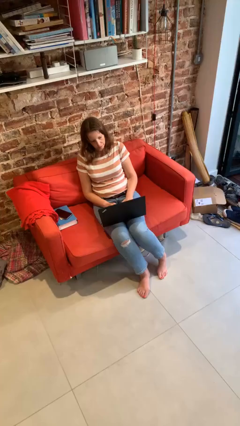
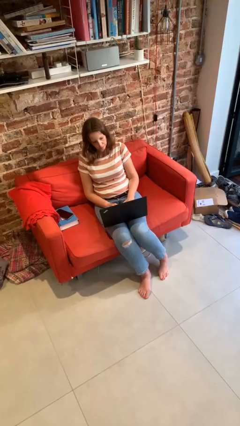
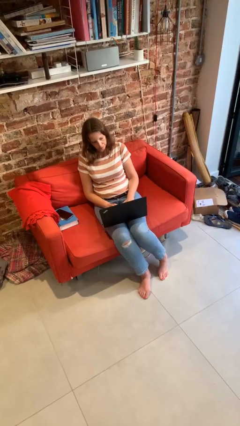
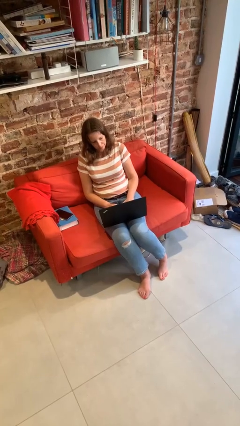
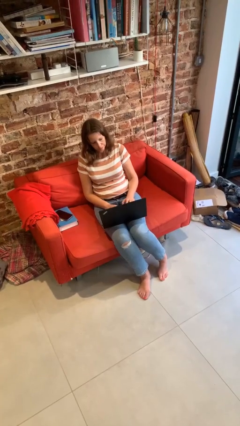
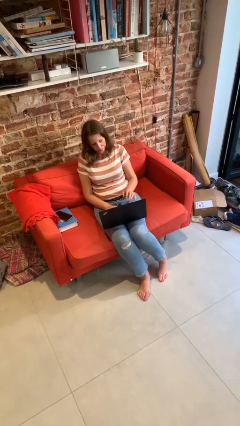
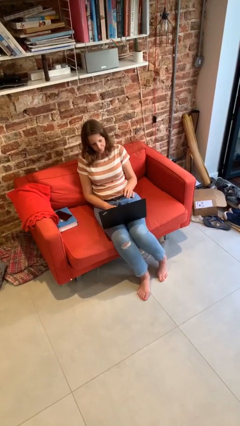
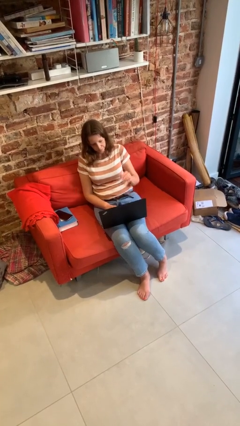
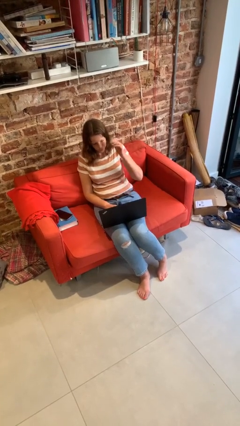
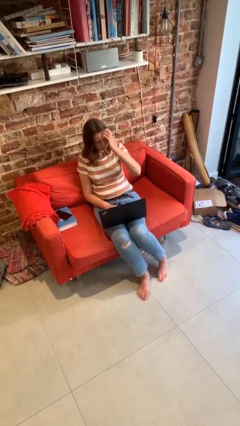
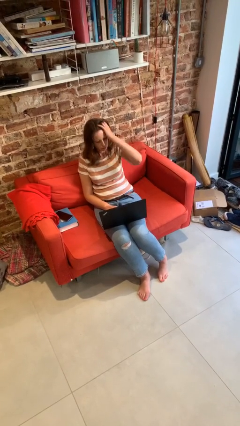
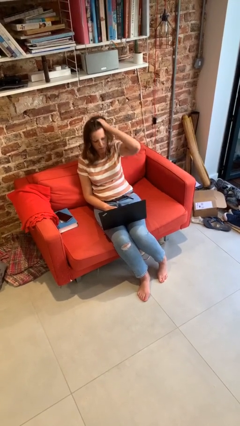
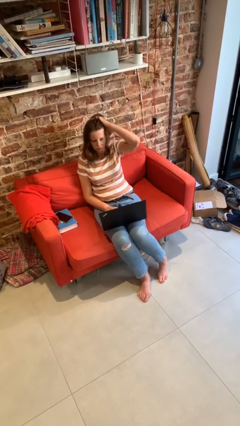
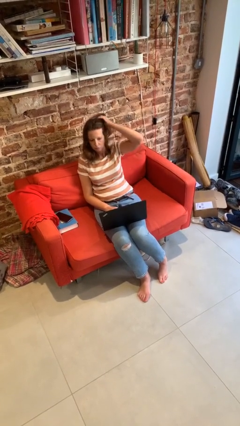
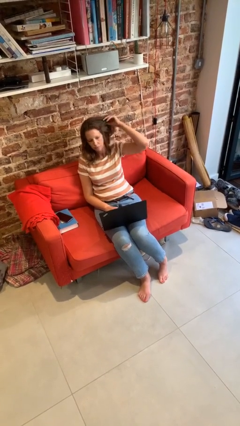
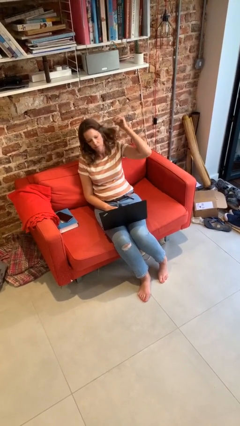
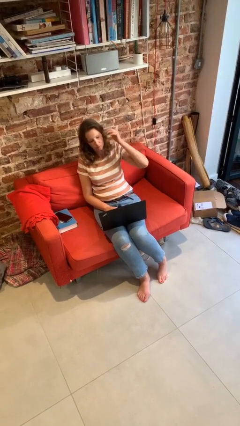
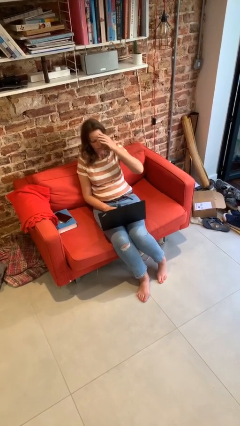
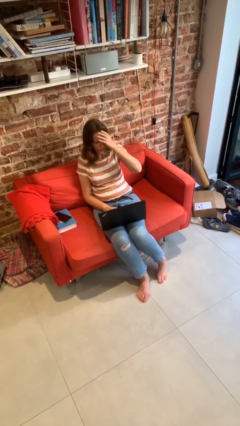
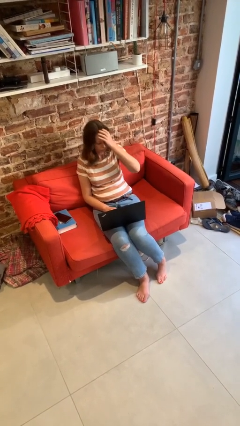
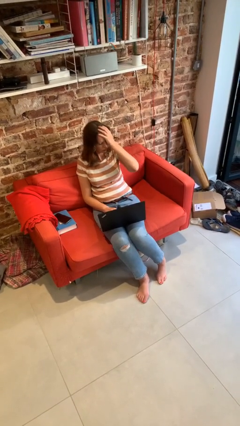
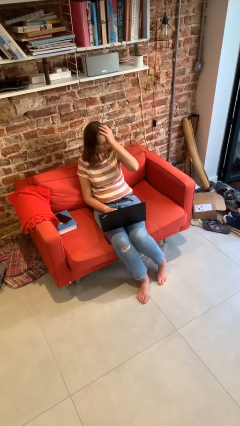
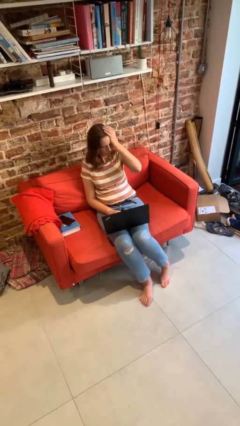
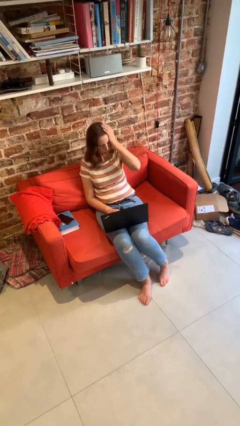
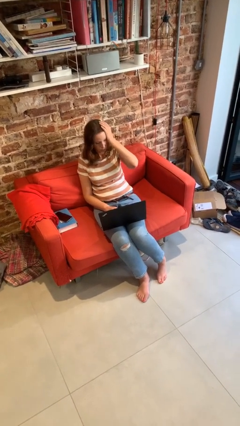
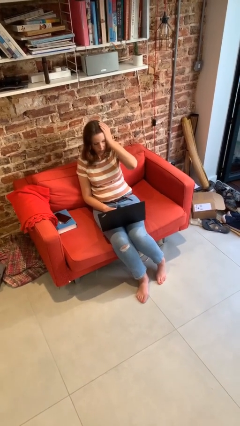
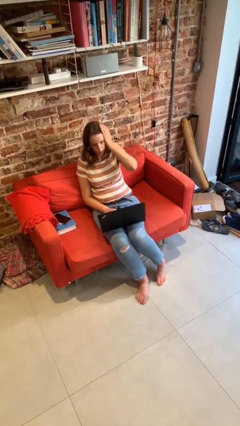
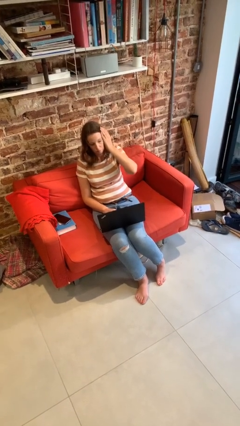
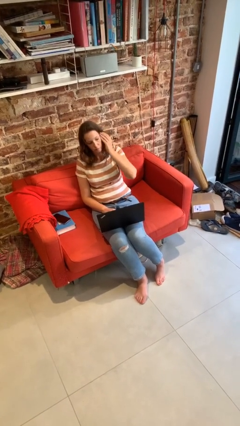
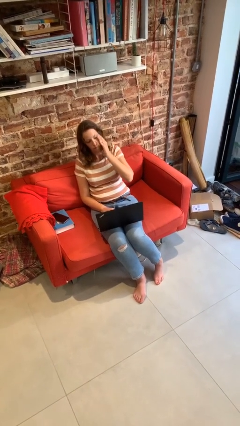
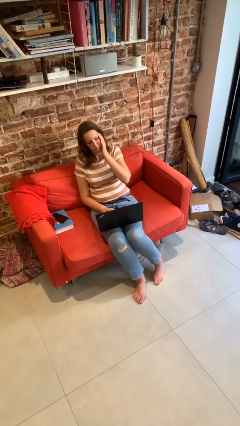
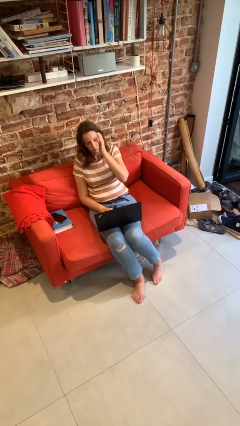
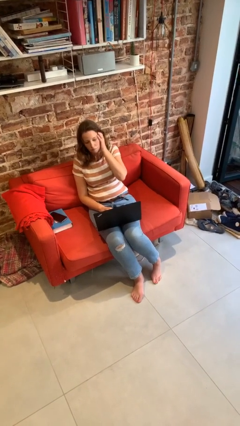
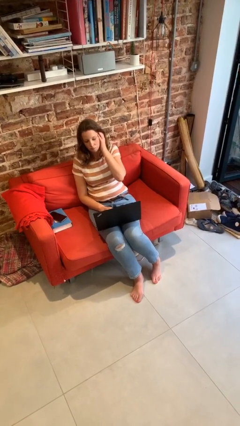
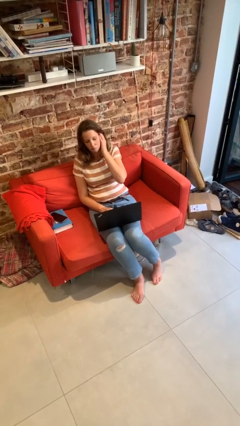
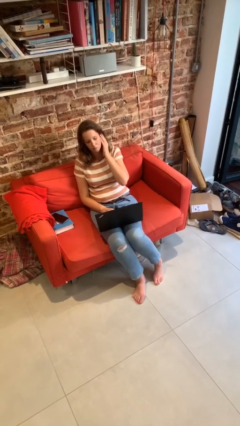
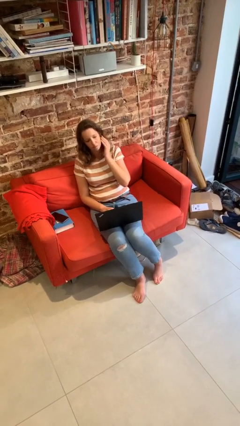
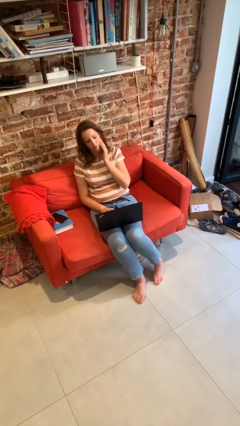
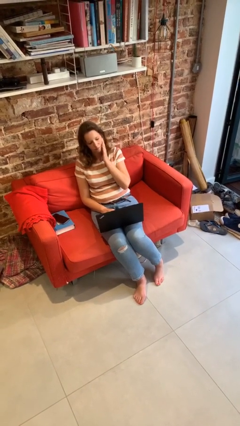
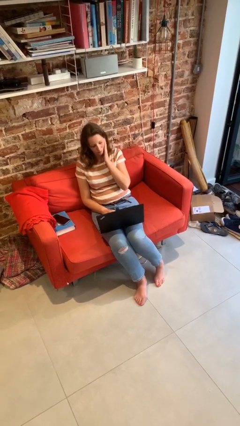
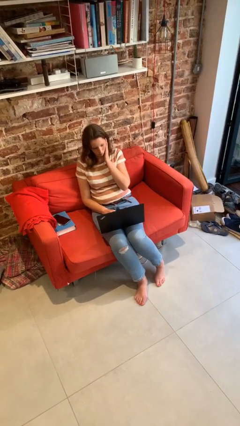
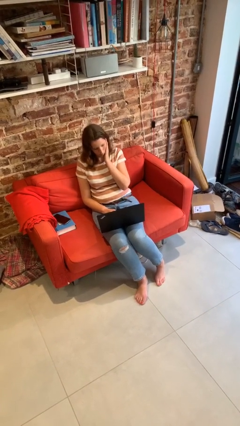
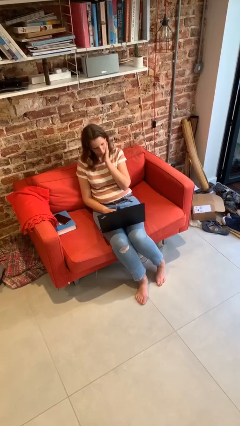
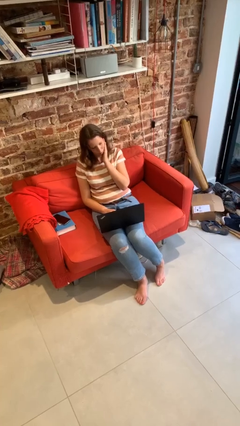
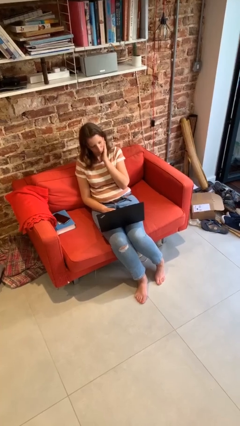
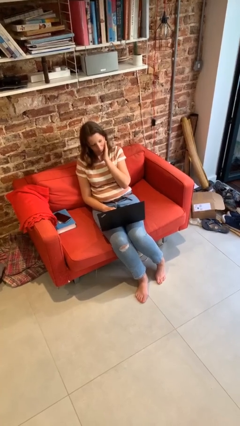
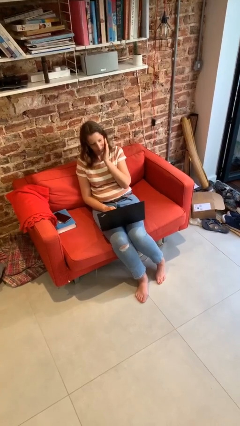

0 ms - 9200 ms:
person interacts with laptop

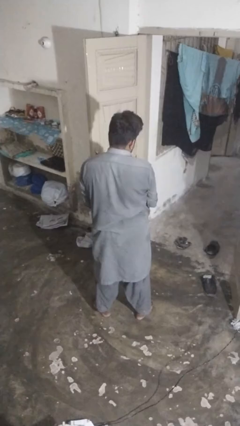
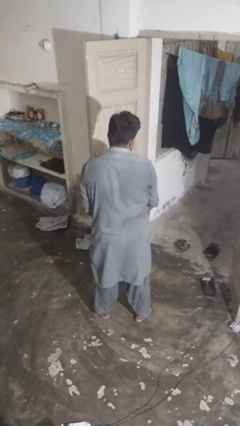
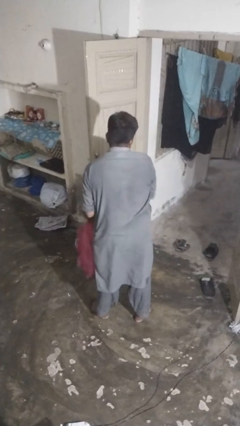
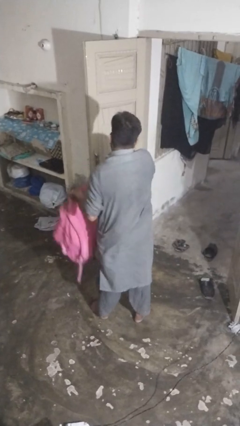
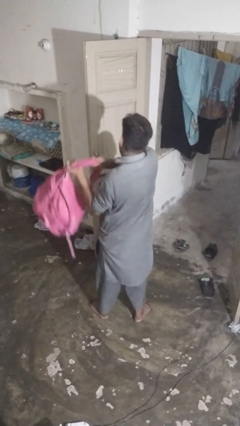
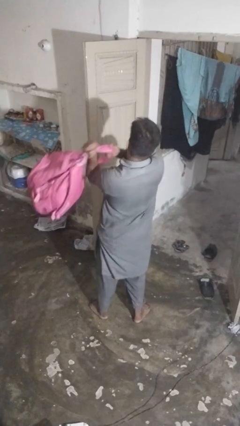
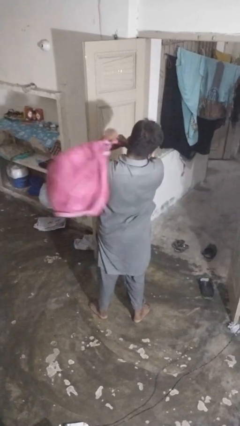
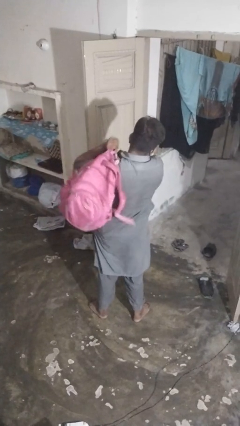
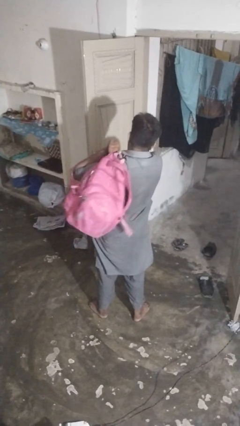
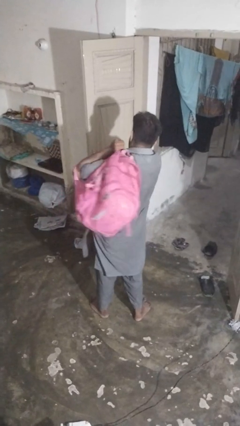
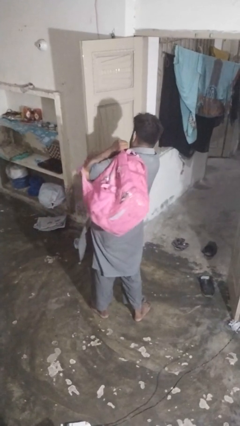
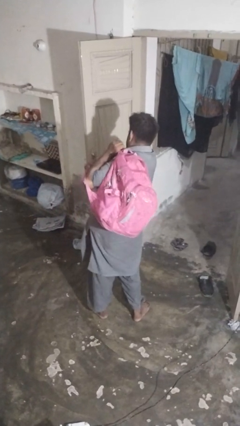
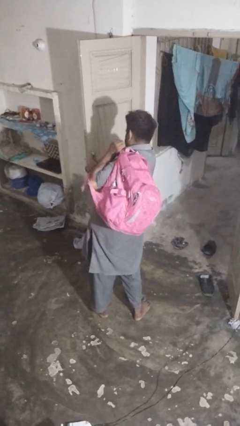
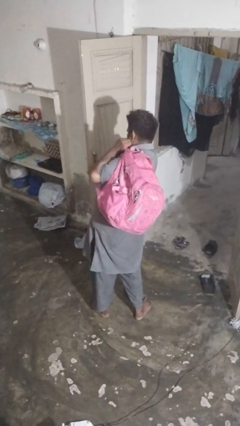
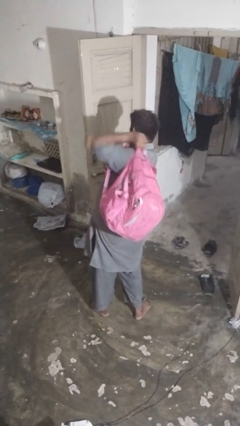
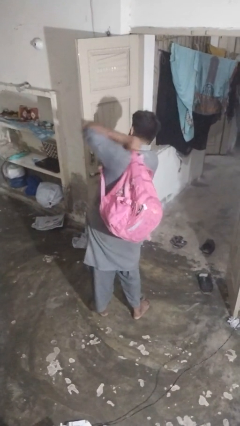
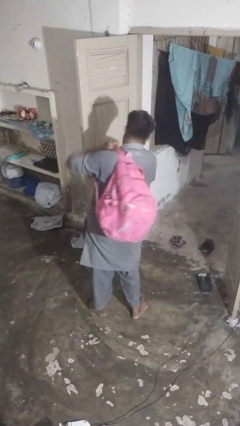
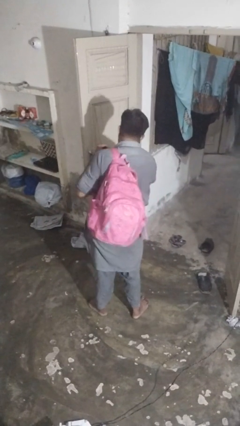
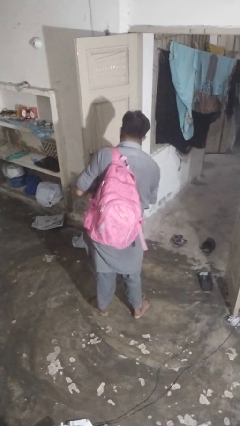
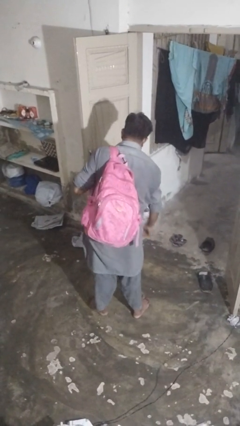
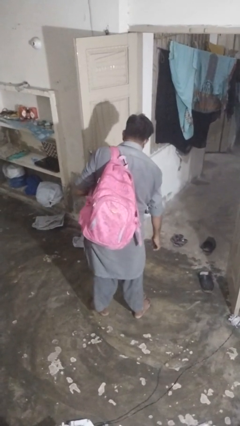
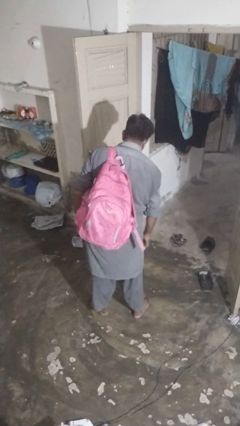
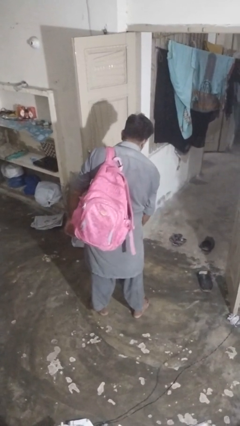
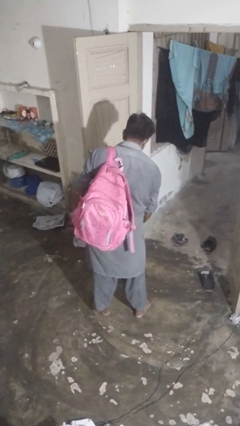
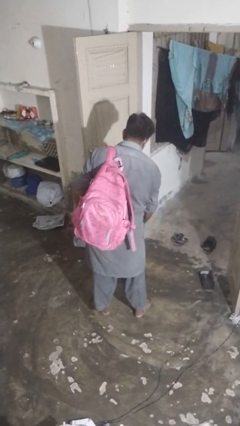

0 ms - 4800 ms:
person puts on backpack

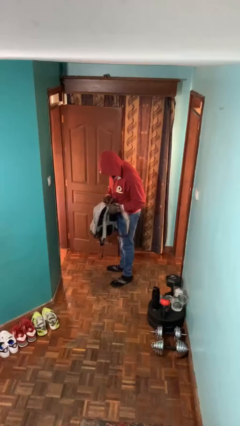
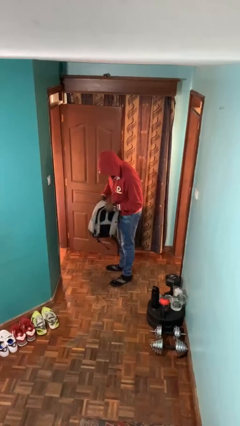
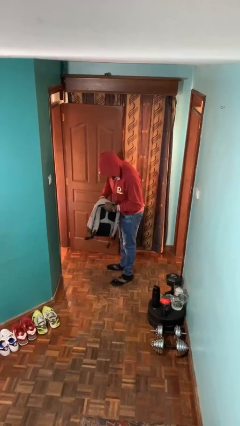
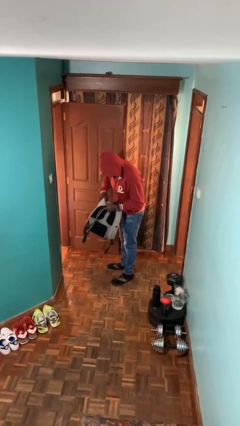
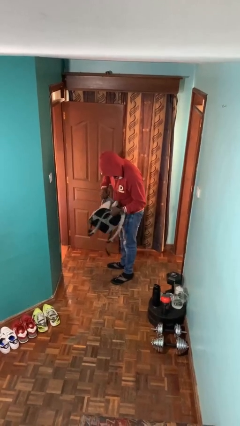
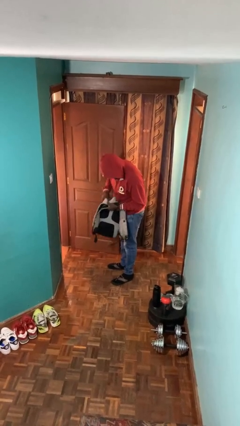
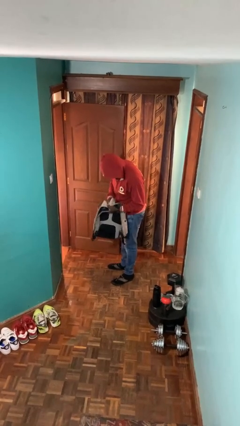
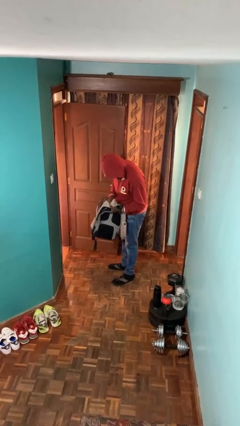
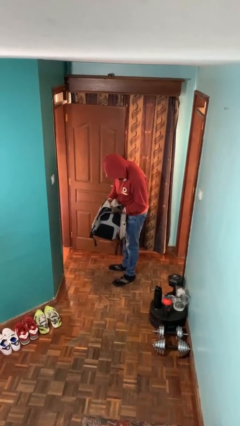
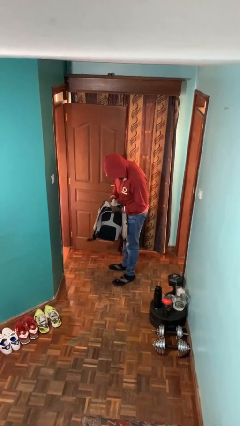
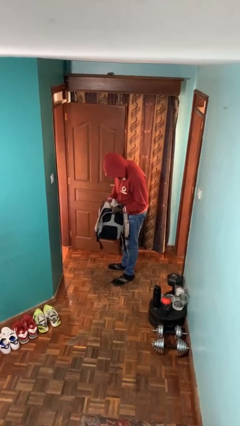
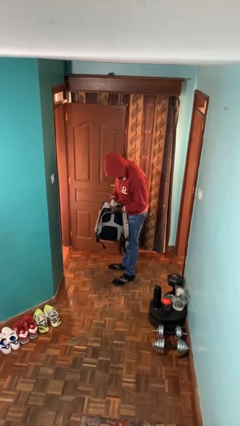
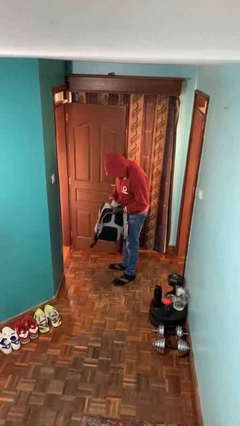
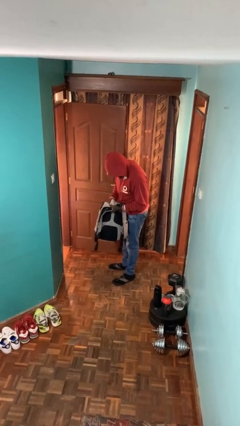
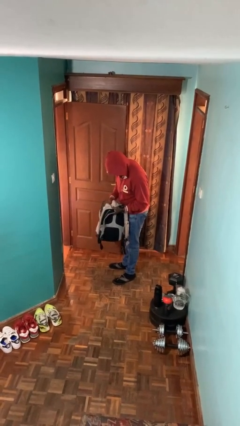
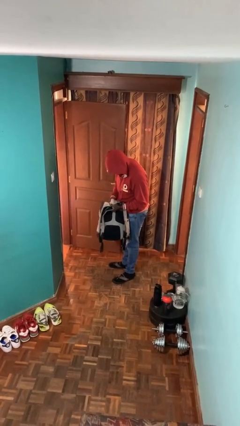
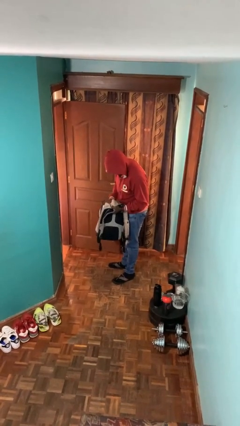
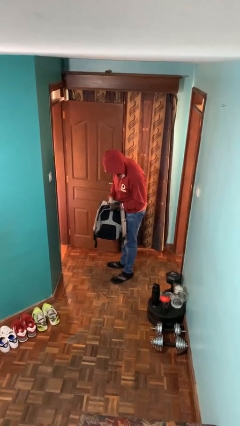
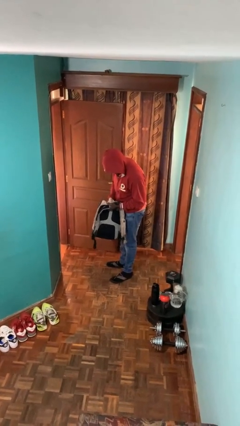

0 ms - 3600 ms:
person searches in backpack

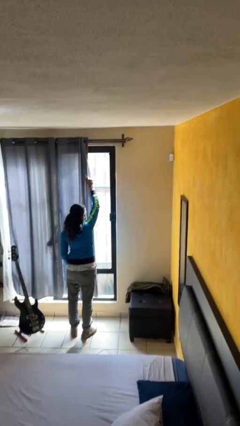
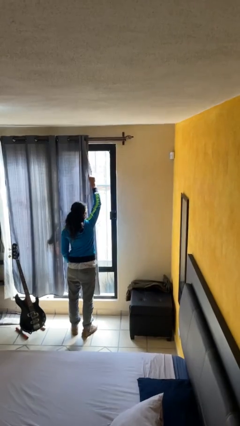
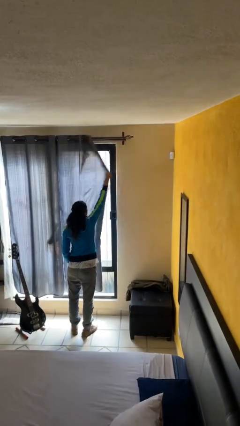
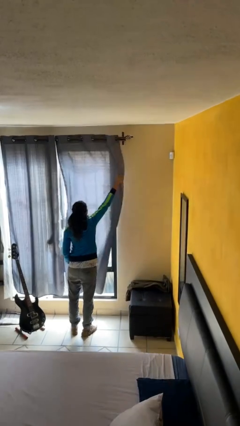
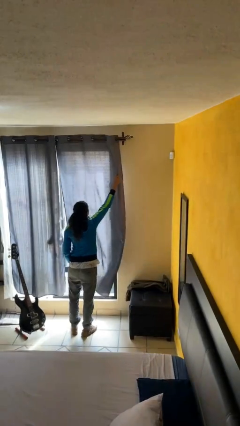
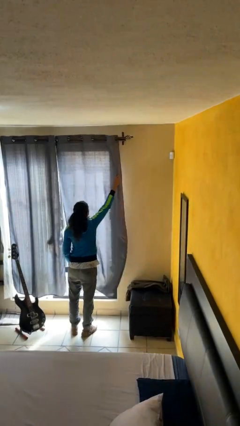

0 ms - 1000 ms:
person closes curtains
